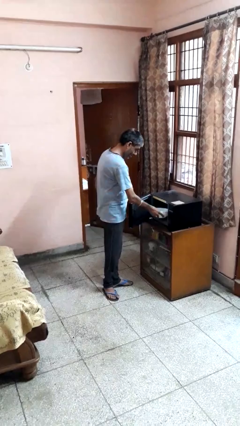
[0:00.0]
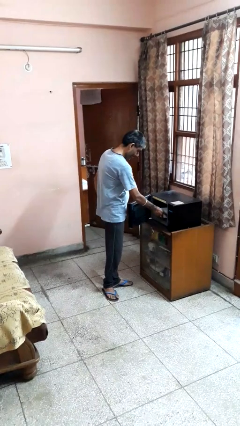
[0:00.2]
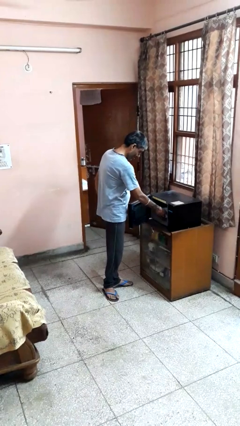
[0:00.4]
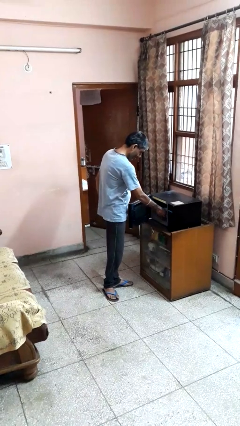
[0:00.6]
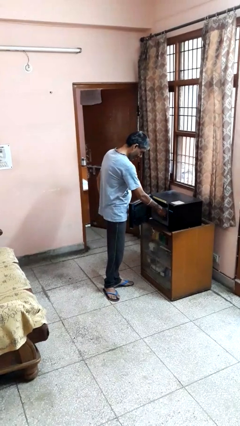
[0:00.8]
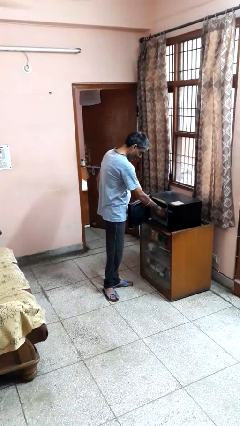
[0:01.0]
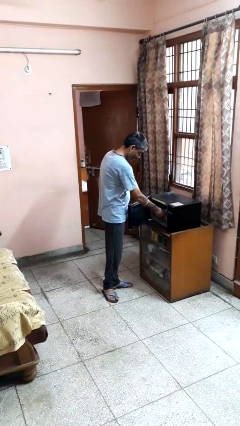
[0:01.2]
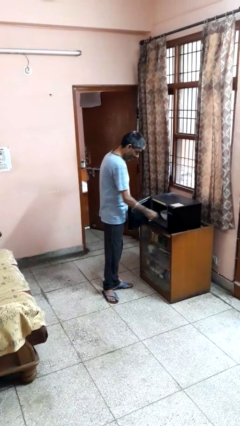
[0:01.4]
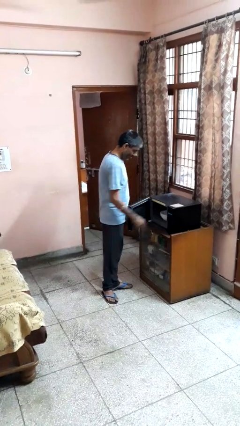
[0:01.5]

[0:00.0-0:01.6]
person puts object into microwave

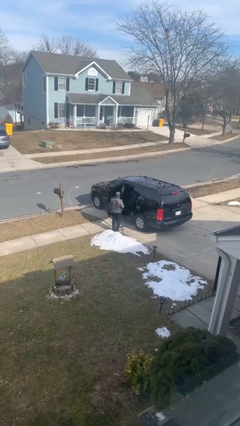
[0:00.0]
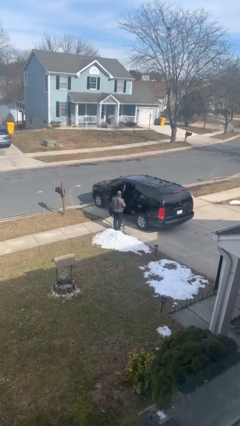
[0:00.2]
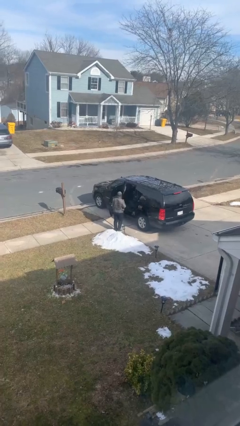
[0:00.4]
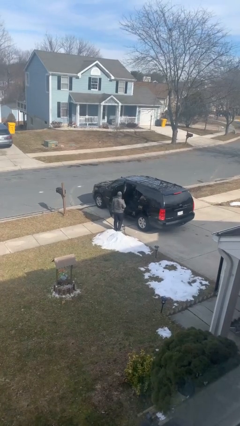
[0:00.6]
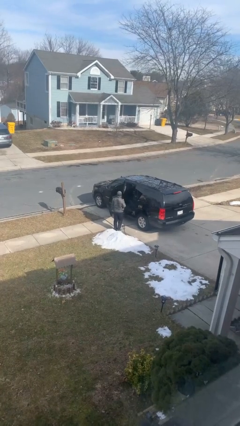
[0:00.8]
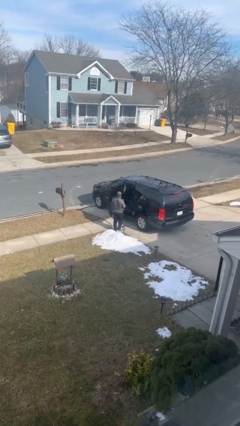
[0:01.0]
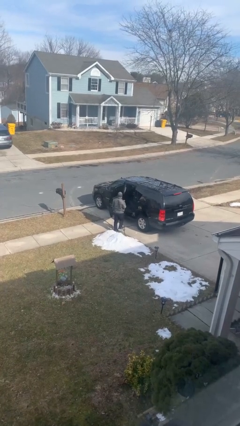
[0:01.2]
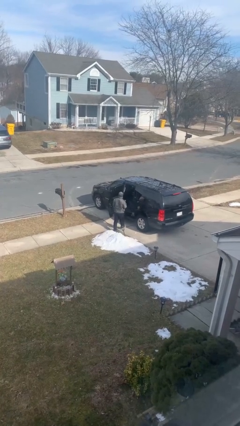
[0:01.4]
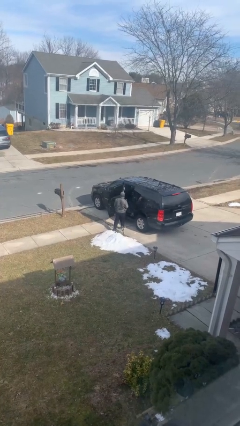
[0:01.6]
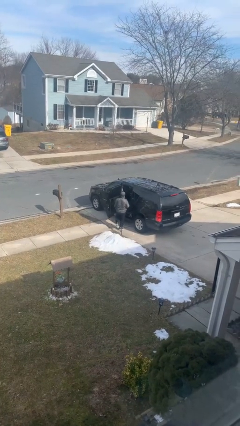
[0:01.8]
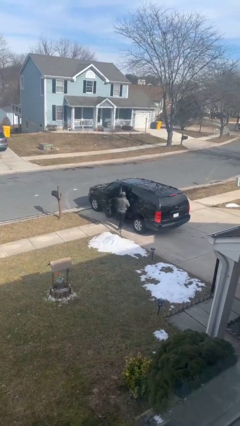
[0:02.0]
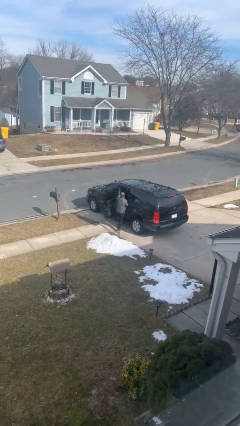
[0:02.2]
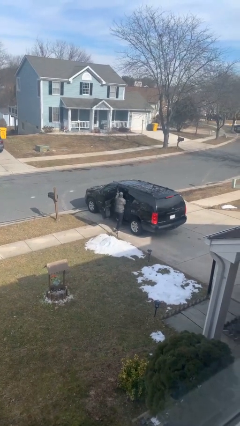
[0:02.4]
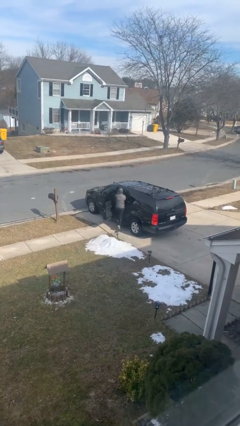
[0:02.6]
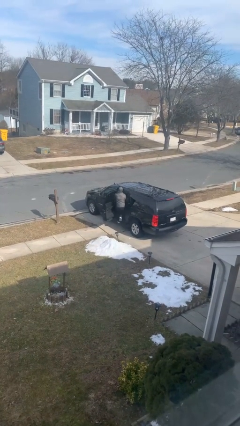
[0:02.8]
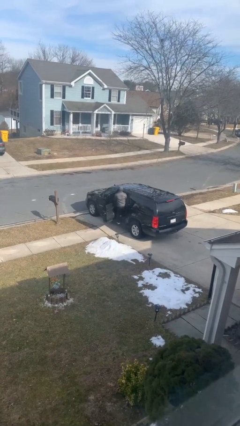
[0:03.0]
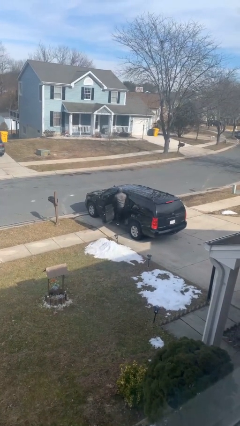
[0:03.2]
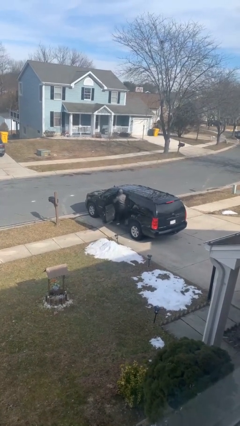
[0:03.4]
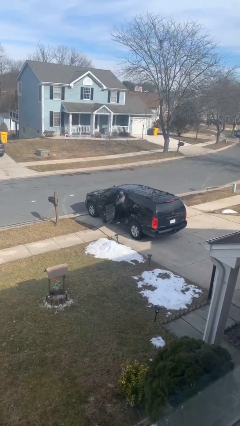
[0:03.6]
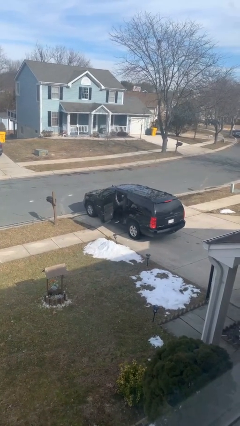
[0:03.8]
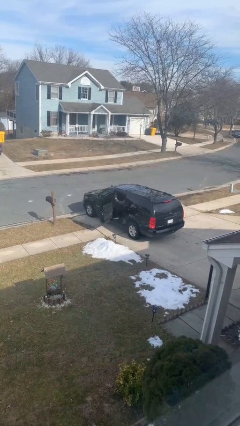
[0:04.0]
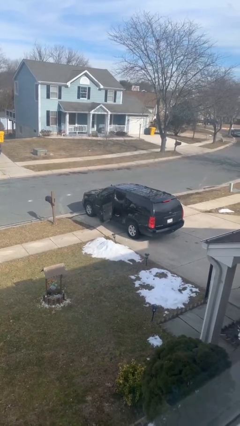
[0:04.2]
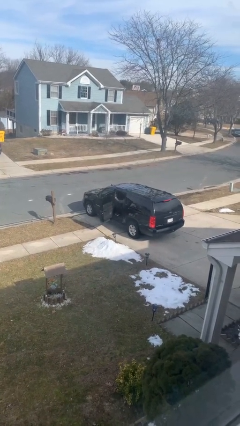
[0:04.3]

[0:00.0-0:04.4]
person enters car

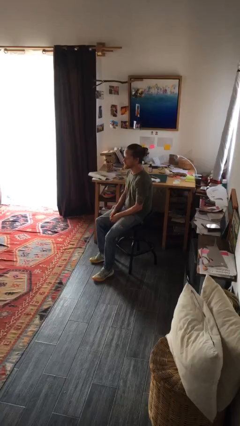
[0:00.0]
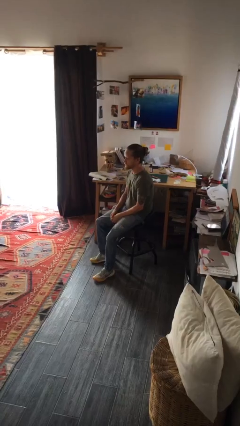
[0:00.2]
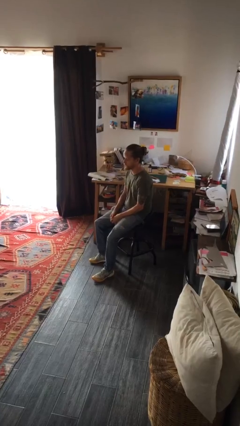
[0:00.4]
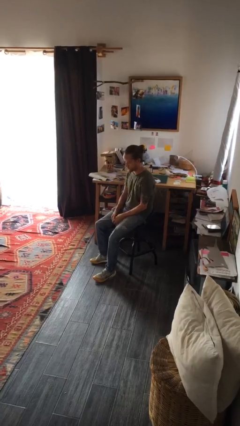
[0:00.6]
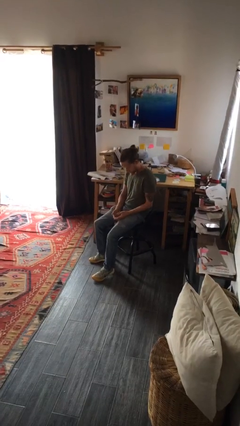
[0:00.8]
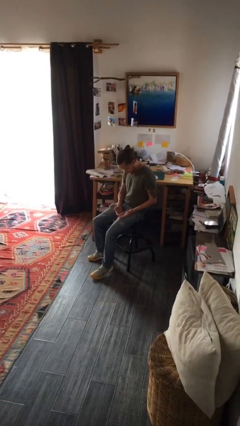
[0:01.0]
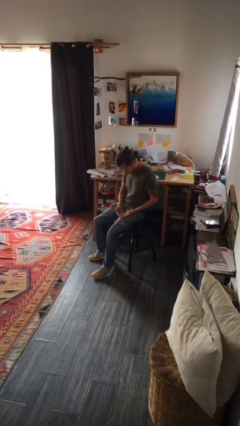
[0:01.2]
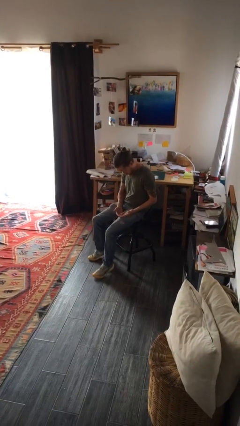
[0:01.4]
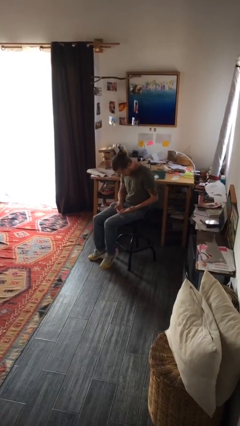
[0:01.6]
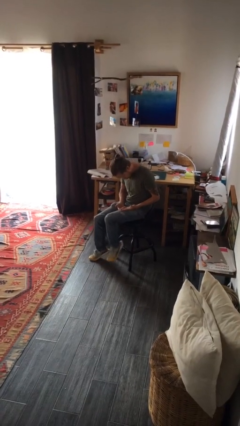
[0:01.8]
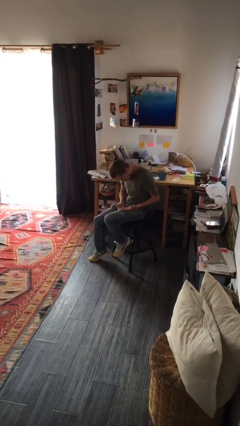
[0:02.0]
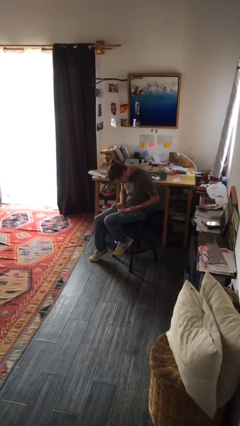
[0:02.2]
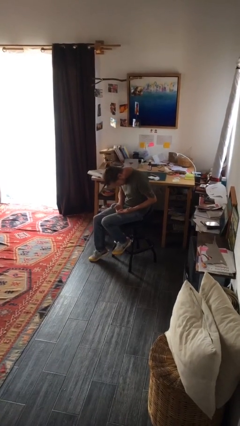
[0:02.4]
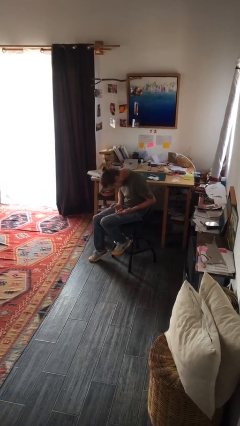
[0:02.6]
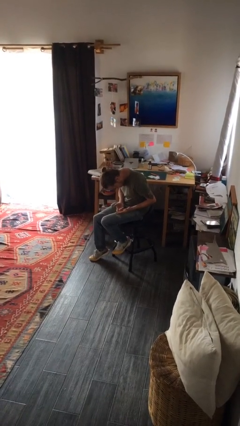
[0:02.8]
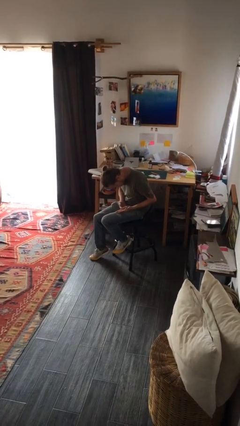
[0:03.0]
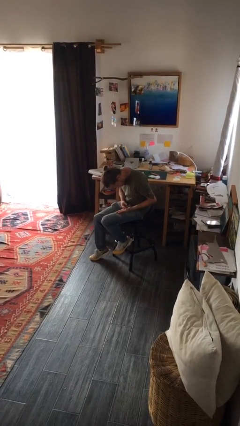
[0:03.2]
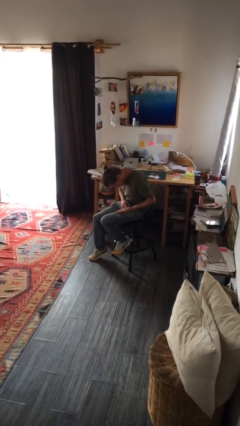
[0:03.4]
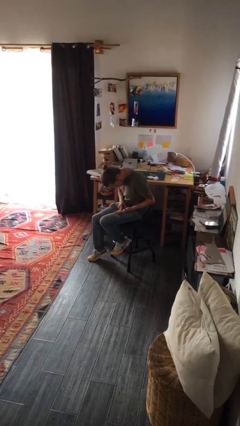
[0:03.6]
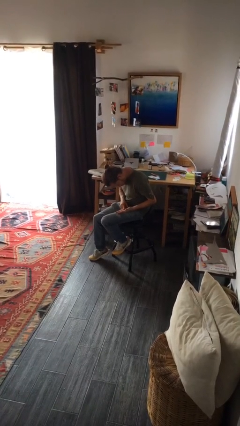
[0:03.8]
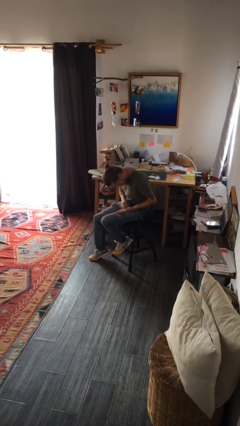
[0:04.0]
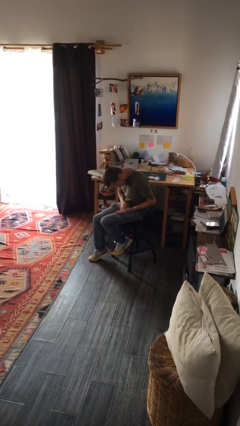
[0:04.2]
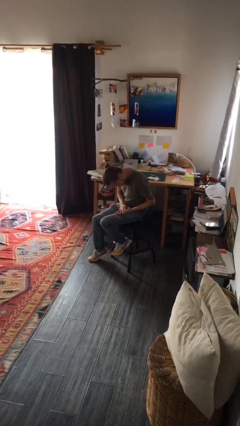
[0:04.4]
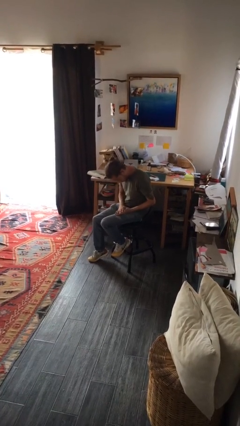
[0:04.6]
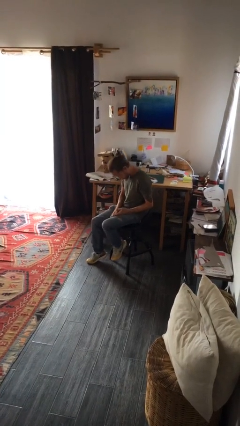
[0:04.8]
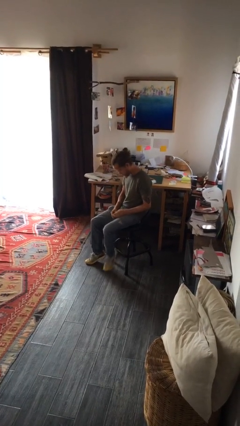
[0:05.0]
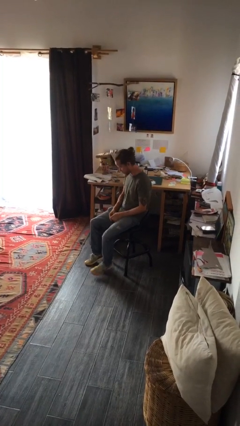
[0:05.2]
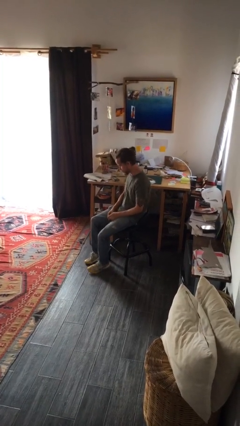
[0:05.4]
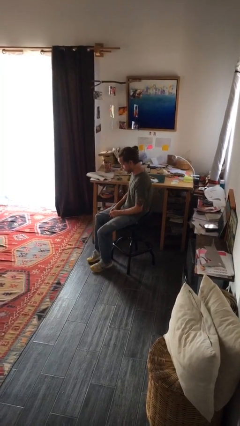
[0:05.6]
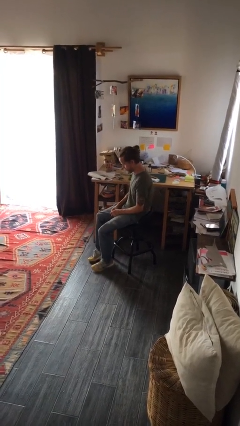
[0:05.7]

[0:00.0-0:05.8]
person looks at hands in lap

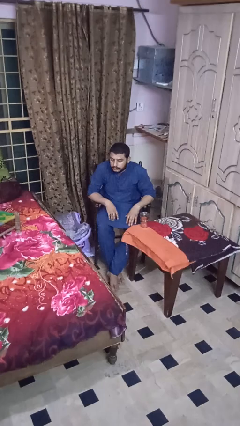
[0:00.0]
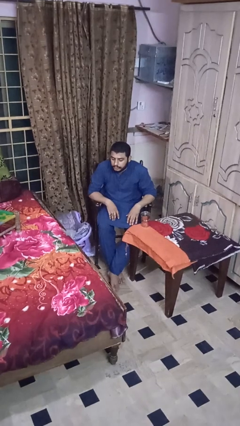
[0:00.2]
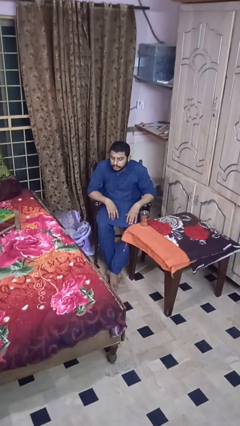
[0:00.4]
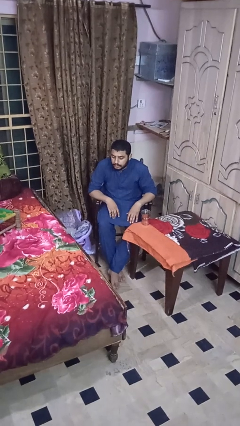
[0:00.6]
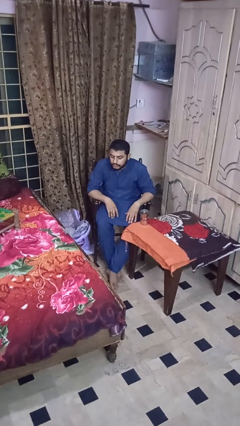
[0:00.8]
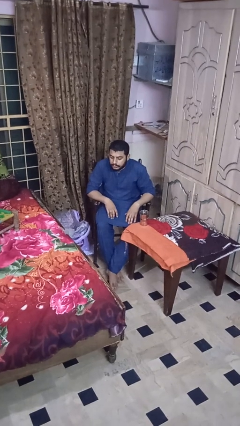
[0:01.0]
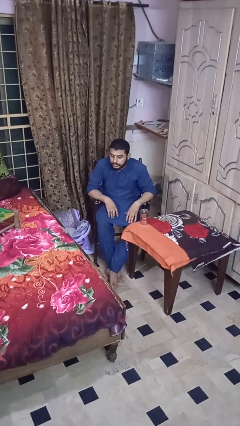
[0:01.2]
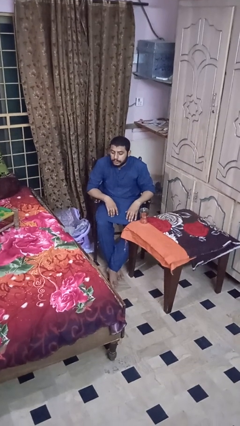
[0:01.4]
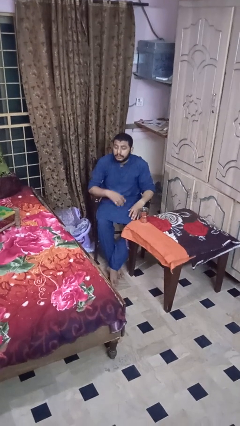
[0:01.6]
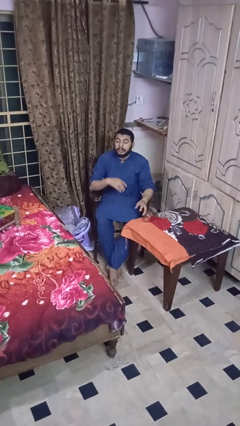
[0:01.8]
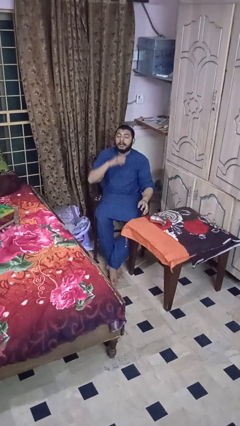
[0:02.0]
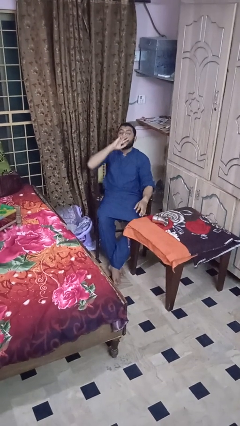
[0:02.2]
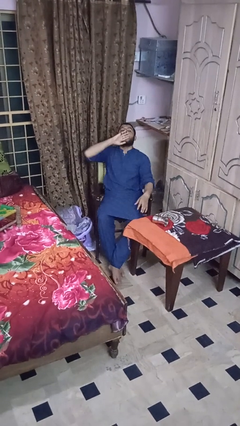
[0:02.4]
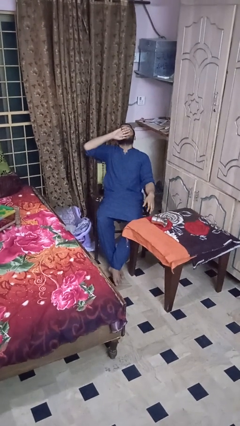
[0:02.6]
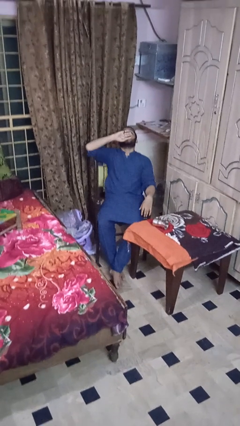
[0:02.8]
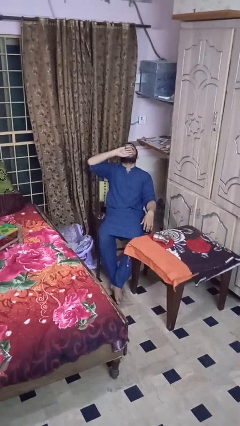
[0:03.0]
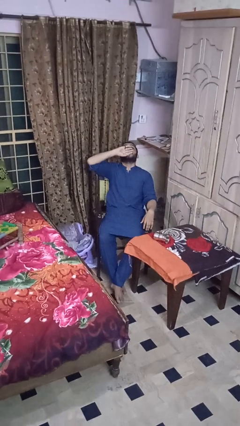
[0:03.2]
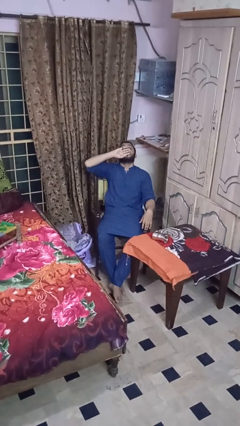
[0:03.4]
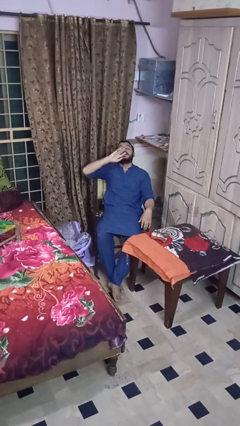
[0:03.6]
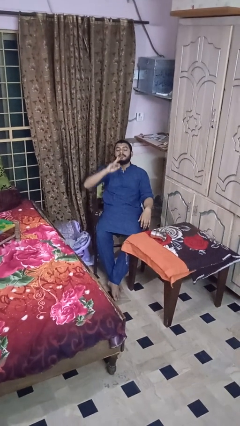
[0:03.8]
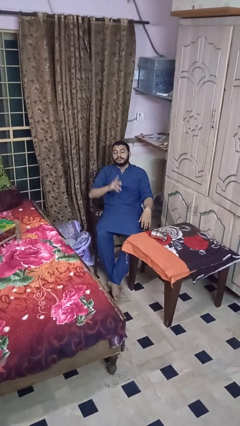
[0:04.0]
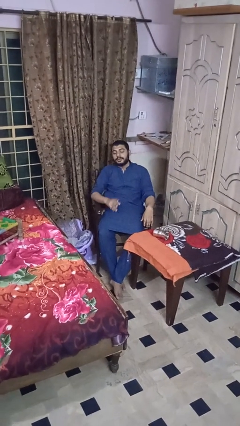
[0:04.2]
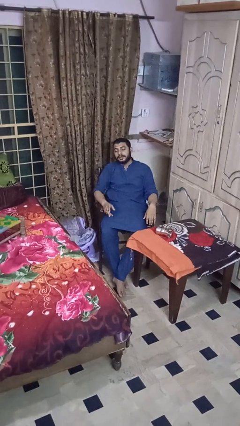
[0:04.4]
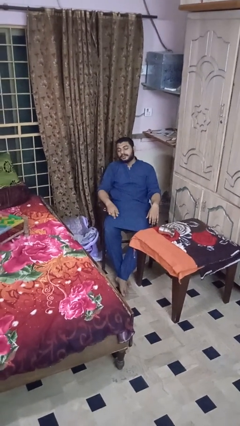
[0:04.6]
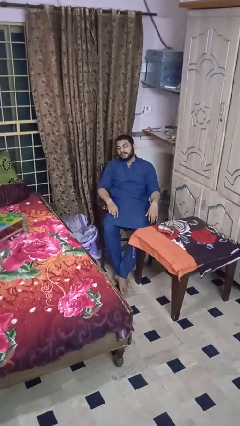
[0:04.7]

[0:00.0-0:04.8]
person knocks over glass

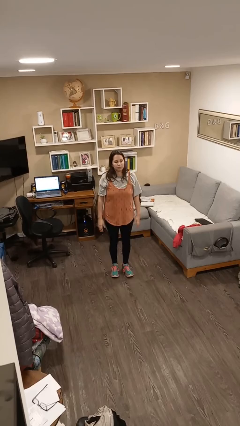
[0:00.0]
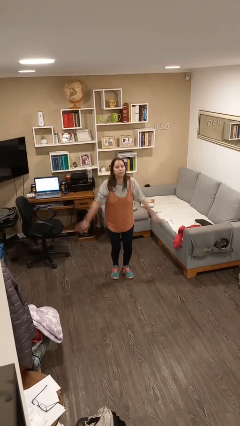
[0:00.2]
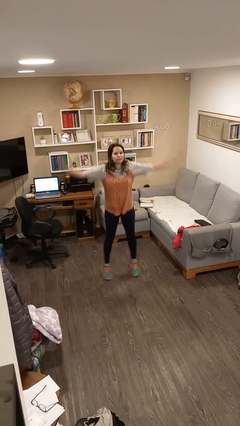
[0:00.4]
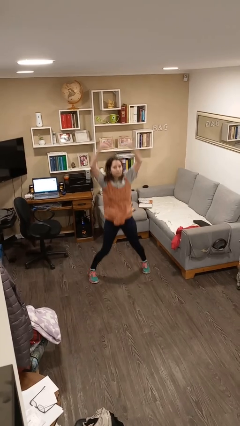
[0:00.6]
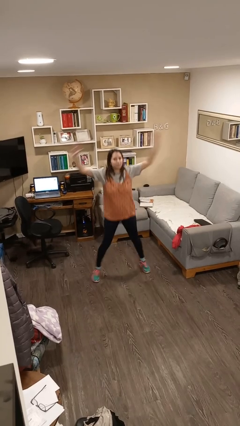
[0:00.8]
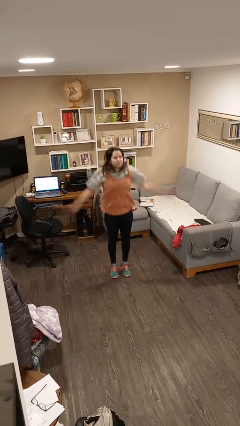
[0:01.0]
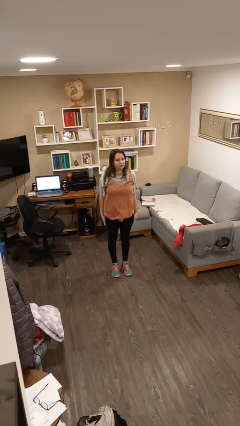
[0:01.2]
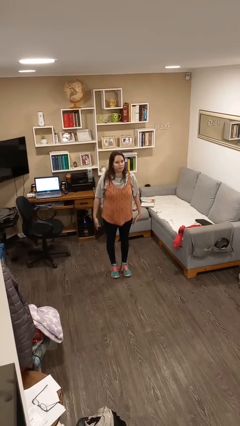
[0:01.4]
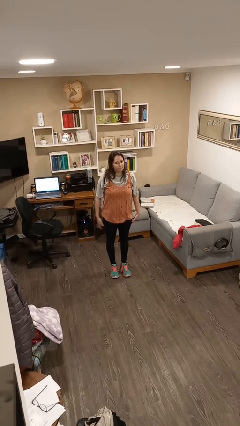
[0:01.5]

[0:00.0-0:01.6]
person exercises with jumping jacks
